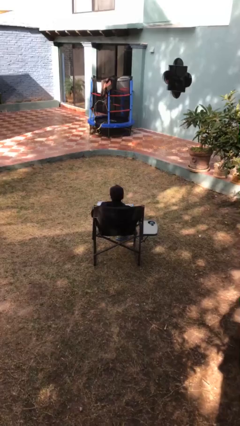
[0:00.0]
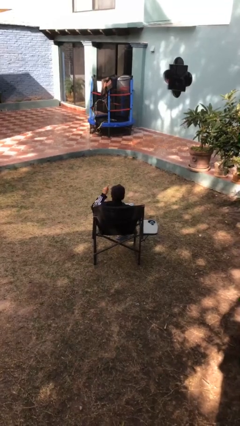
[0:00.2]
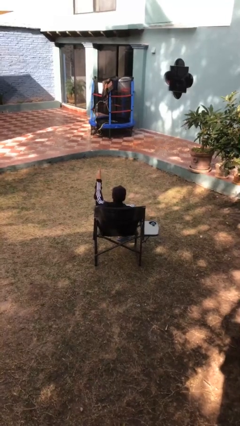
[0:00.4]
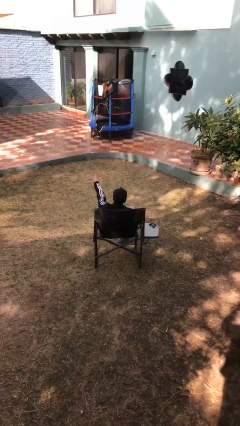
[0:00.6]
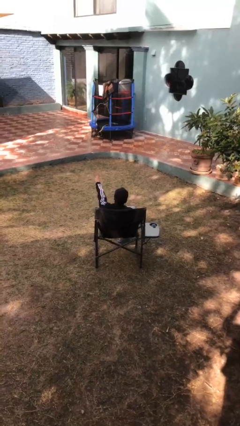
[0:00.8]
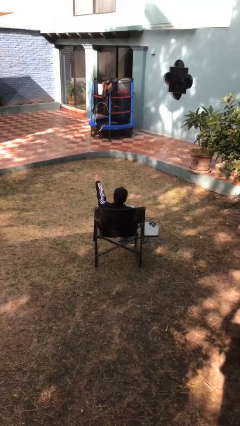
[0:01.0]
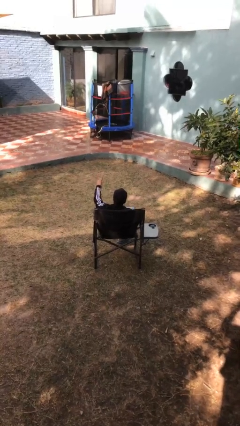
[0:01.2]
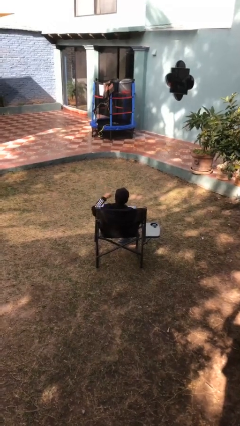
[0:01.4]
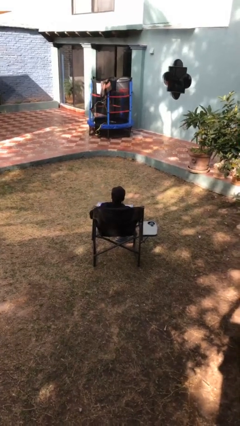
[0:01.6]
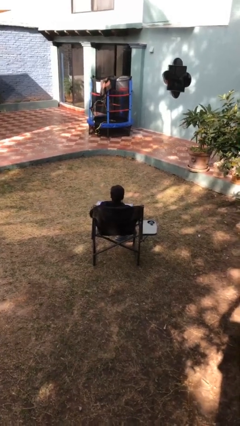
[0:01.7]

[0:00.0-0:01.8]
person gestures number one

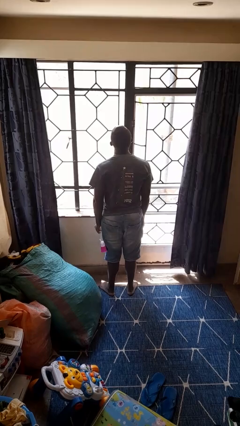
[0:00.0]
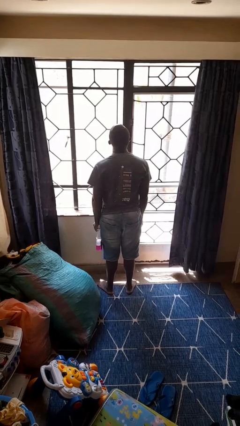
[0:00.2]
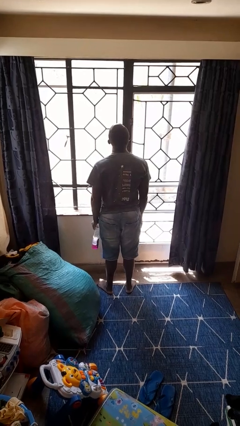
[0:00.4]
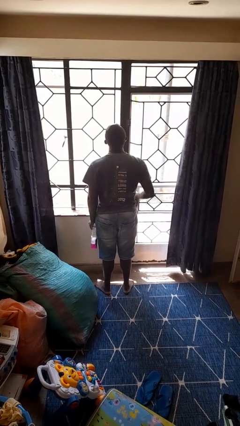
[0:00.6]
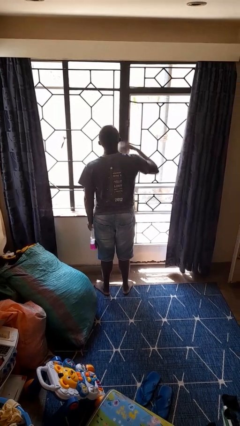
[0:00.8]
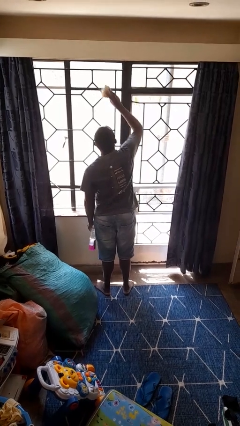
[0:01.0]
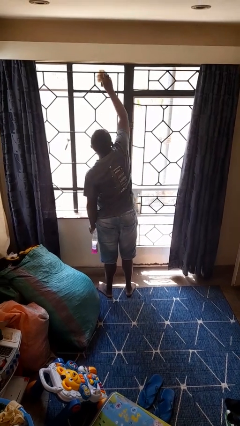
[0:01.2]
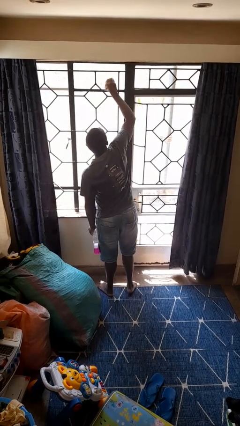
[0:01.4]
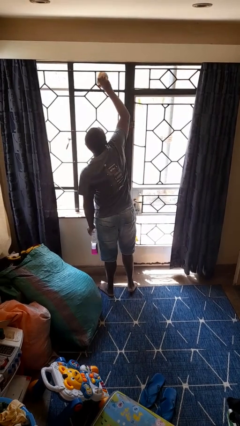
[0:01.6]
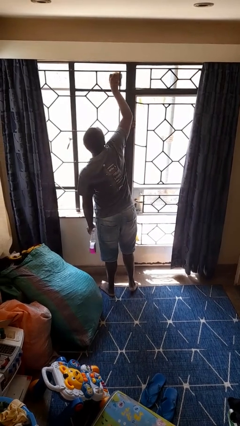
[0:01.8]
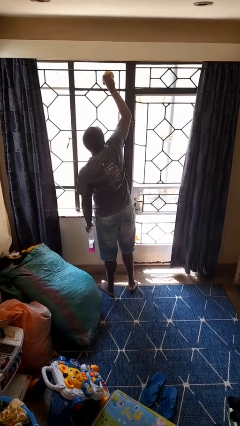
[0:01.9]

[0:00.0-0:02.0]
person washes window

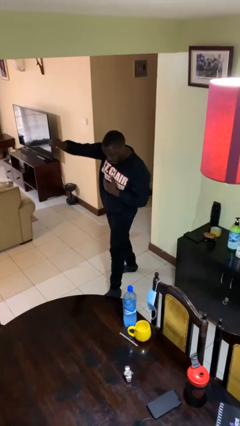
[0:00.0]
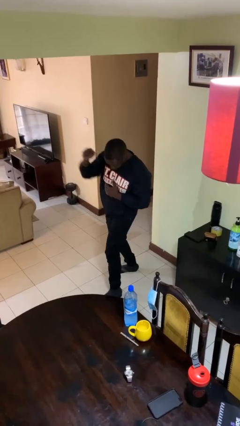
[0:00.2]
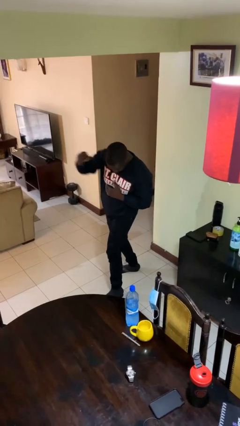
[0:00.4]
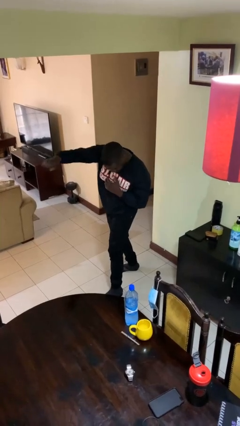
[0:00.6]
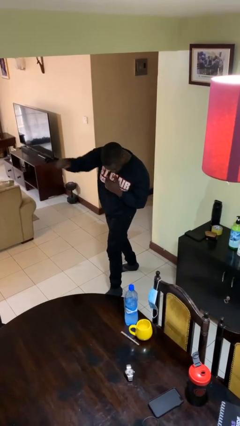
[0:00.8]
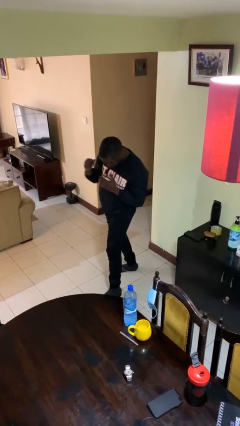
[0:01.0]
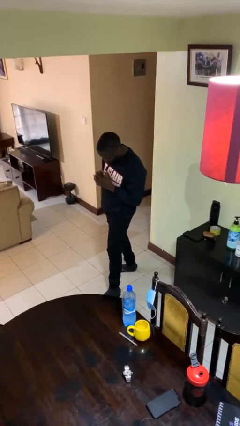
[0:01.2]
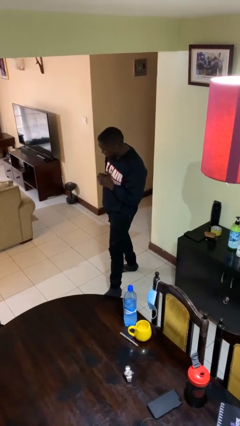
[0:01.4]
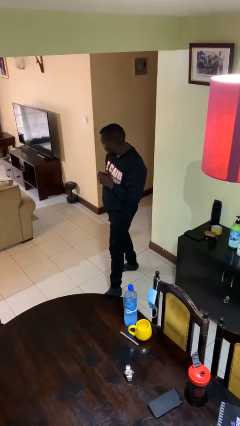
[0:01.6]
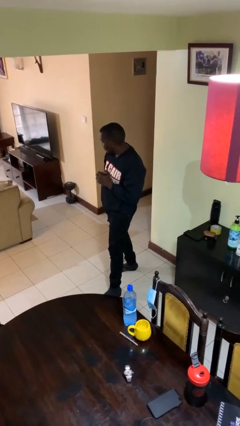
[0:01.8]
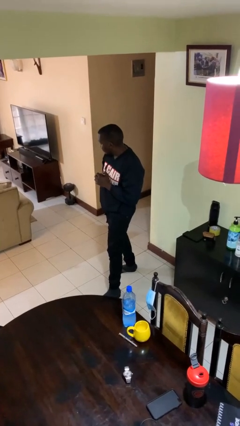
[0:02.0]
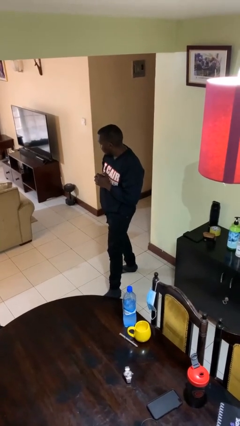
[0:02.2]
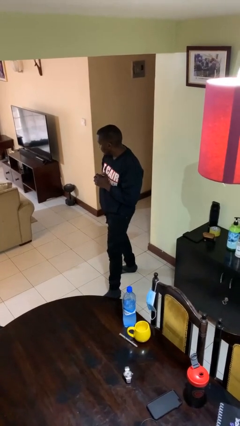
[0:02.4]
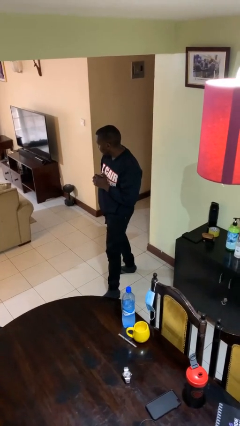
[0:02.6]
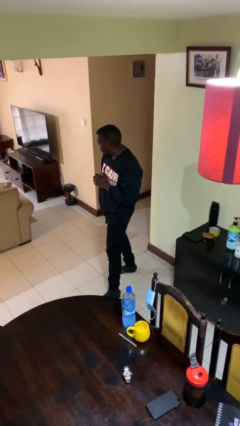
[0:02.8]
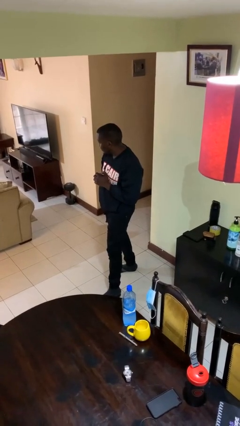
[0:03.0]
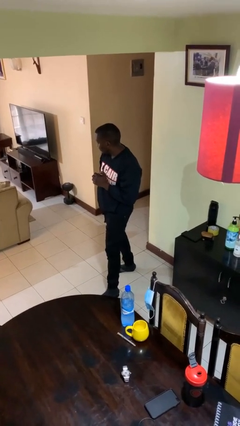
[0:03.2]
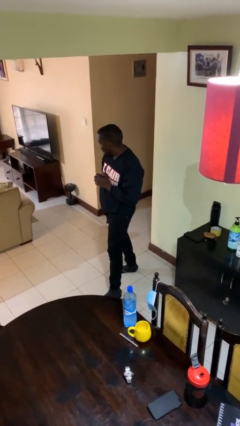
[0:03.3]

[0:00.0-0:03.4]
person punches

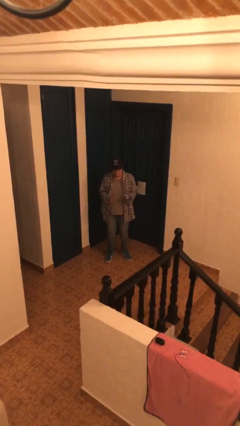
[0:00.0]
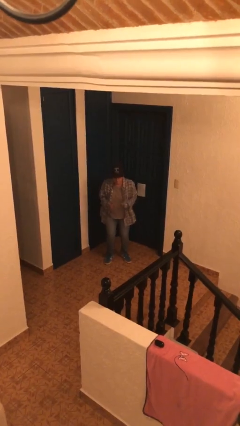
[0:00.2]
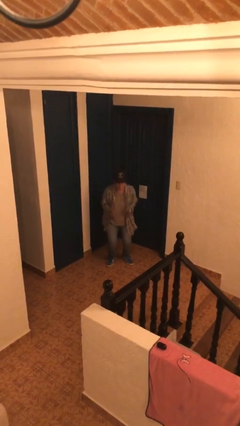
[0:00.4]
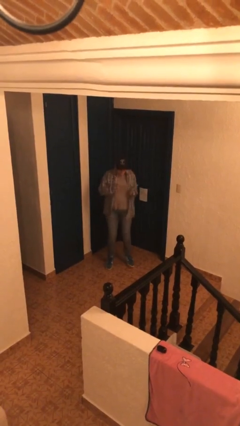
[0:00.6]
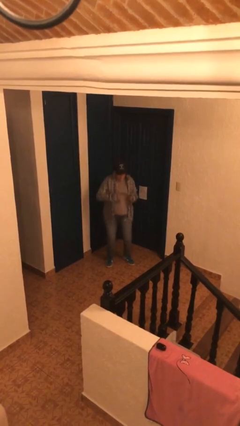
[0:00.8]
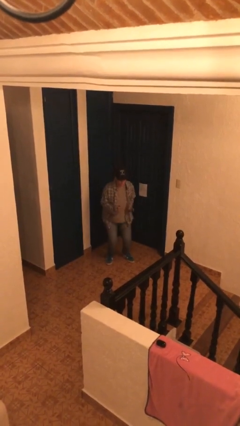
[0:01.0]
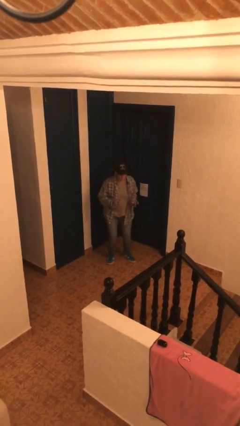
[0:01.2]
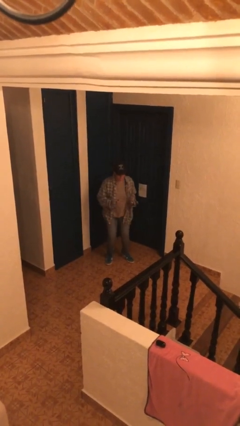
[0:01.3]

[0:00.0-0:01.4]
person jumps

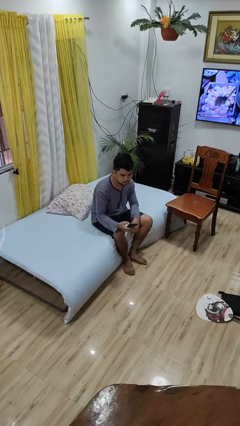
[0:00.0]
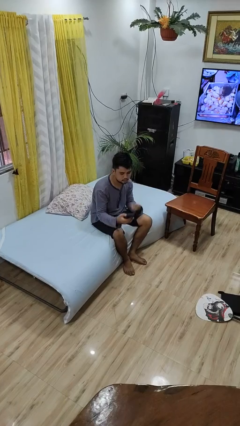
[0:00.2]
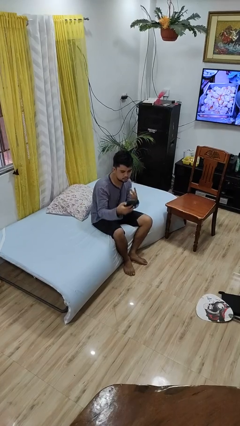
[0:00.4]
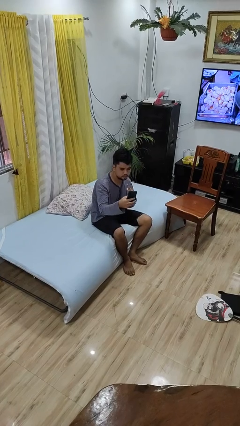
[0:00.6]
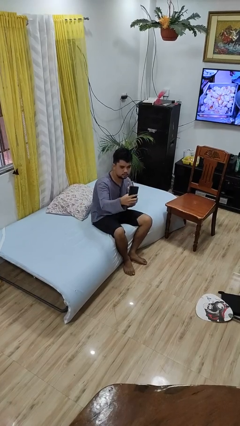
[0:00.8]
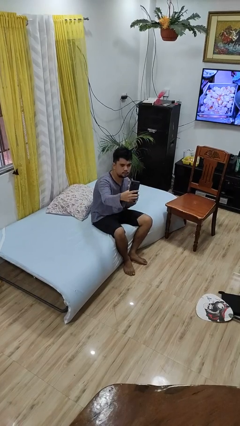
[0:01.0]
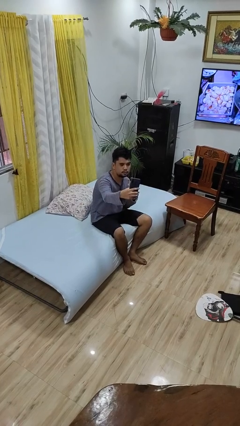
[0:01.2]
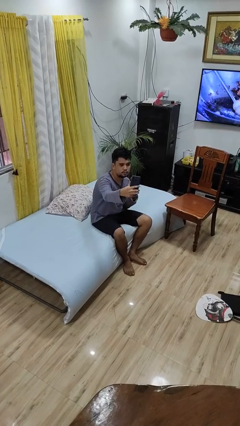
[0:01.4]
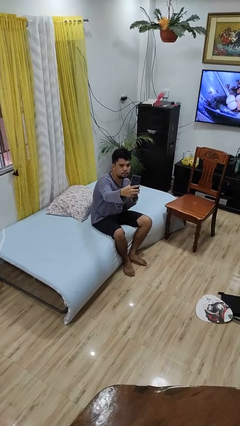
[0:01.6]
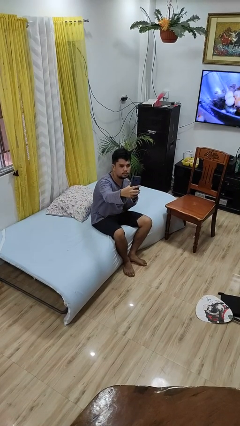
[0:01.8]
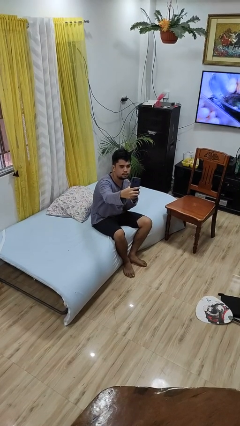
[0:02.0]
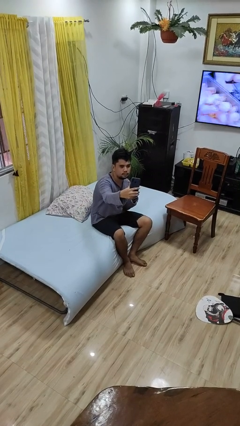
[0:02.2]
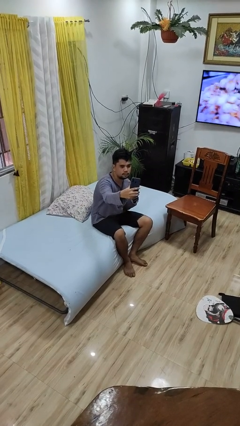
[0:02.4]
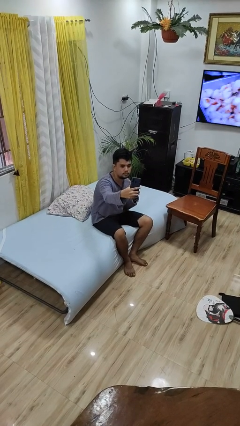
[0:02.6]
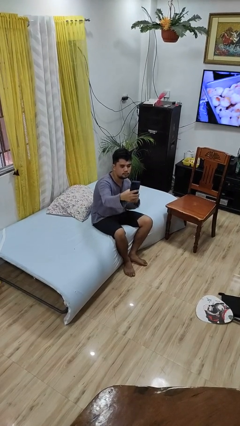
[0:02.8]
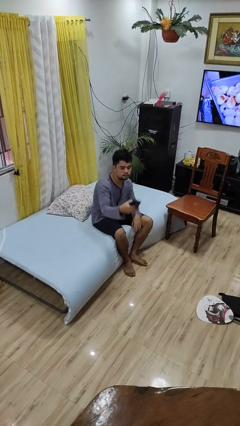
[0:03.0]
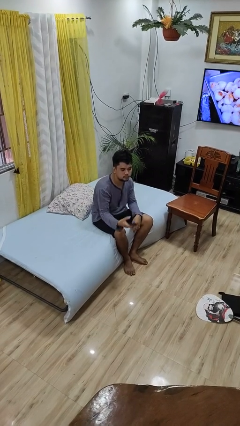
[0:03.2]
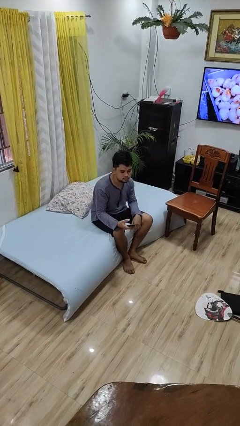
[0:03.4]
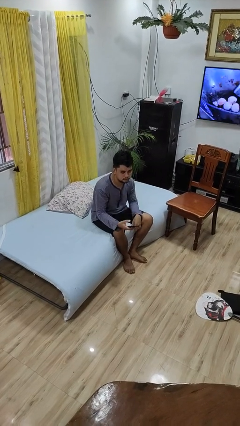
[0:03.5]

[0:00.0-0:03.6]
person takes selfie

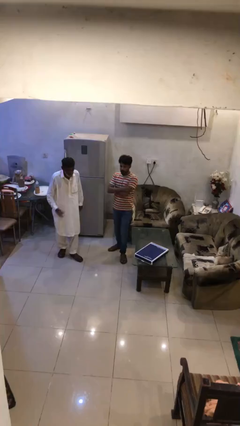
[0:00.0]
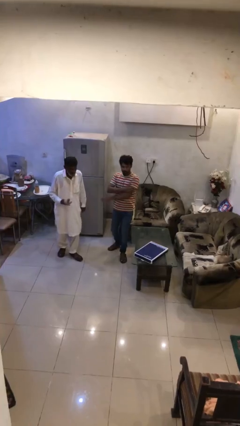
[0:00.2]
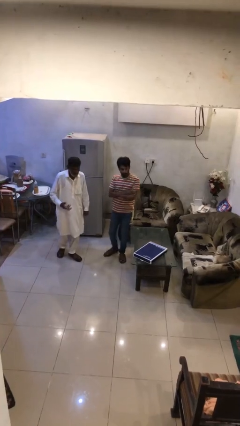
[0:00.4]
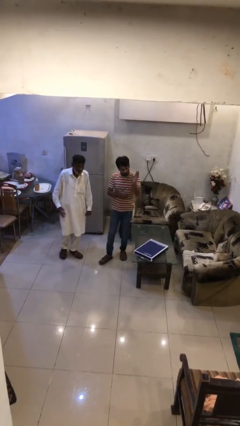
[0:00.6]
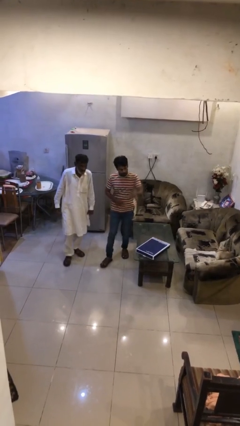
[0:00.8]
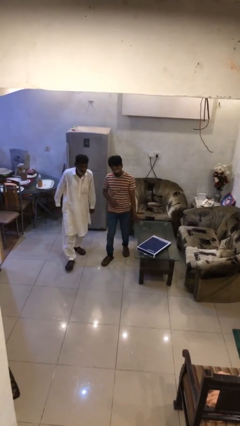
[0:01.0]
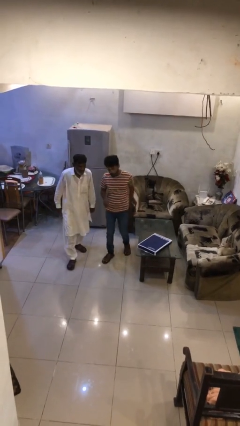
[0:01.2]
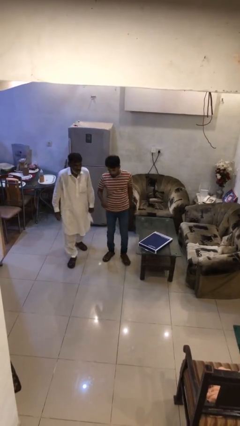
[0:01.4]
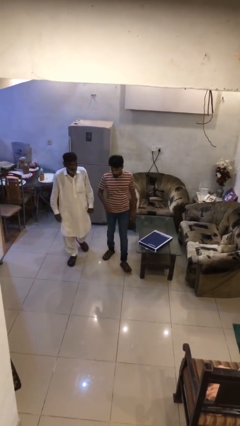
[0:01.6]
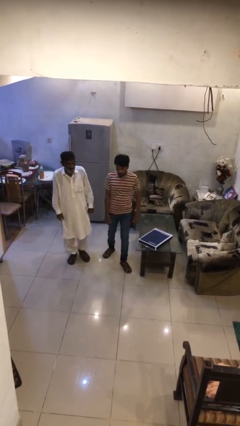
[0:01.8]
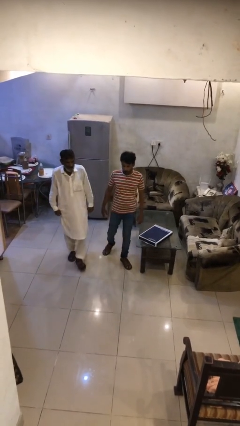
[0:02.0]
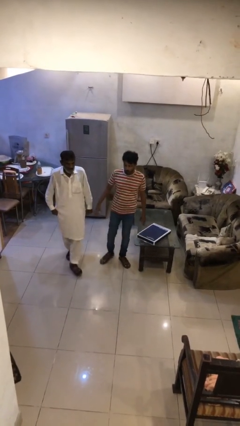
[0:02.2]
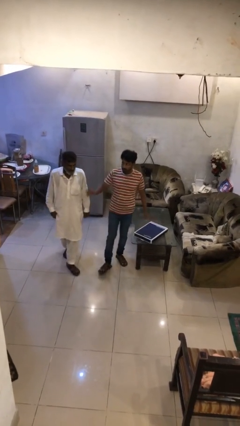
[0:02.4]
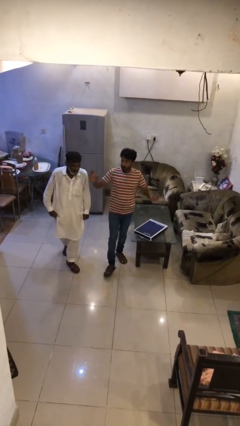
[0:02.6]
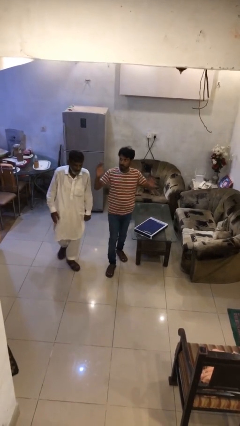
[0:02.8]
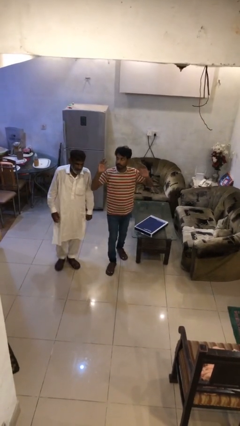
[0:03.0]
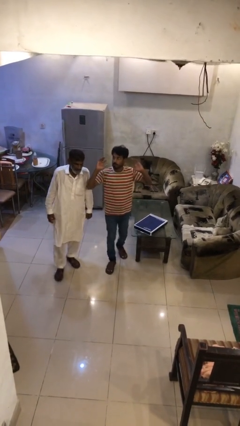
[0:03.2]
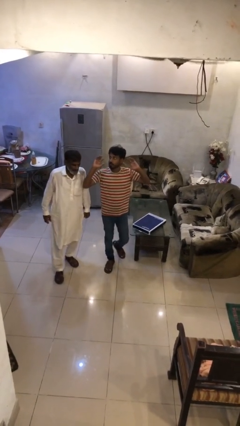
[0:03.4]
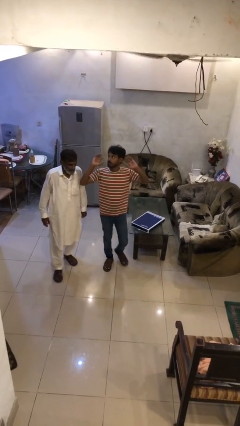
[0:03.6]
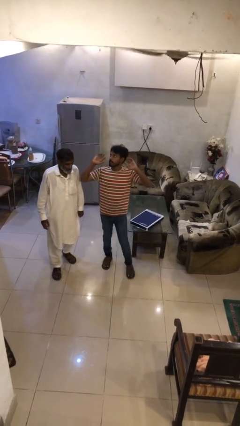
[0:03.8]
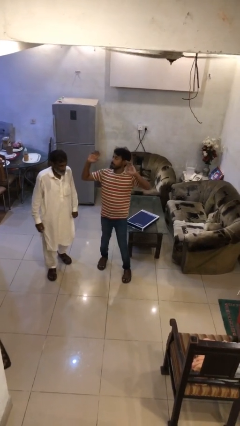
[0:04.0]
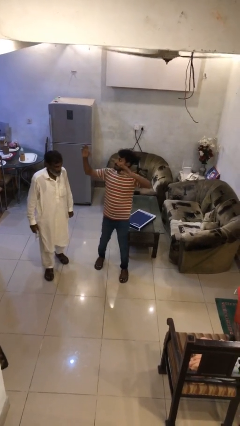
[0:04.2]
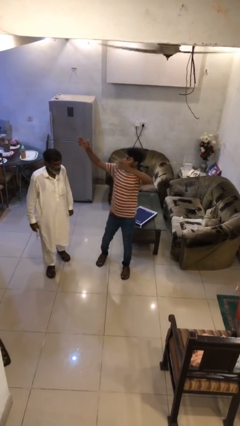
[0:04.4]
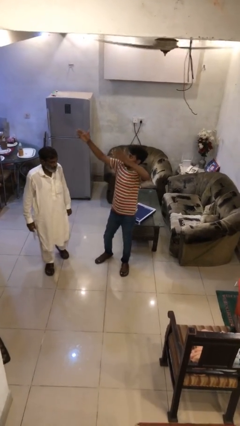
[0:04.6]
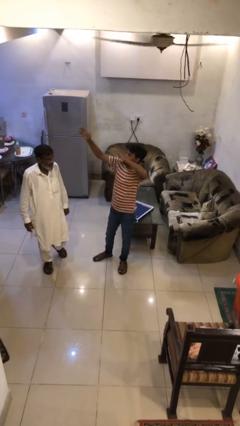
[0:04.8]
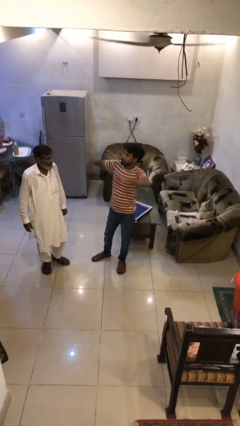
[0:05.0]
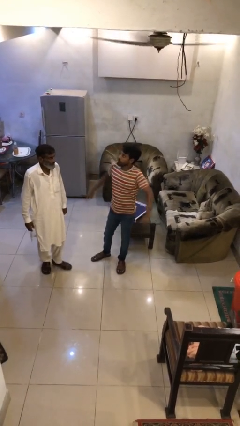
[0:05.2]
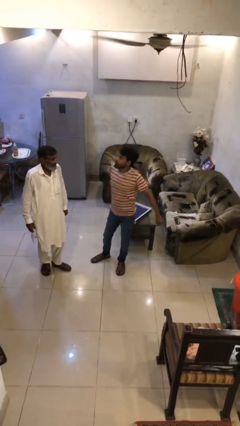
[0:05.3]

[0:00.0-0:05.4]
person talks to person
